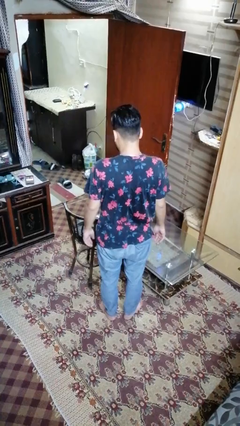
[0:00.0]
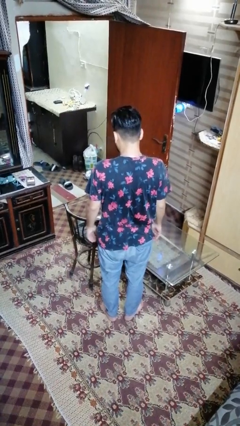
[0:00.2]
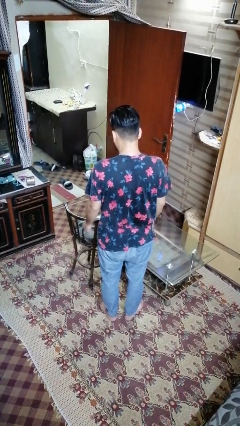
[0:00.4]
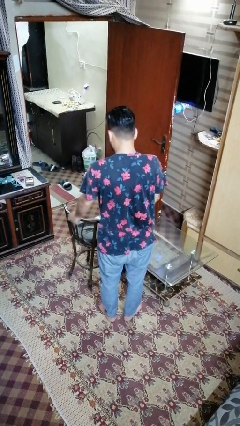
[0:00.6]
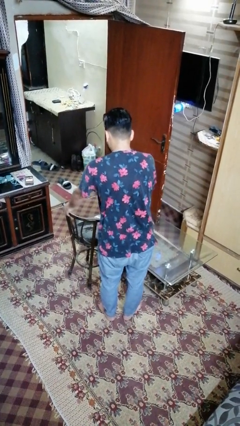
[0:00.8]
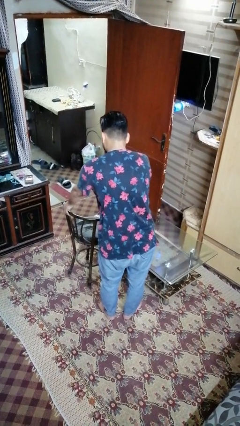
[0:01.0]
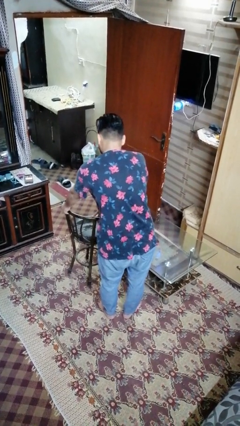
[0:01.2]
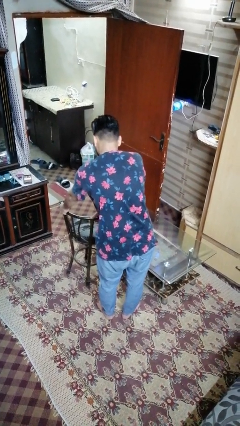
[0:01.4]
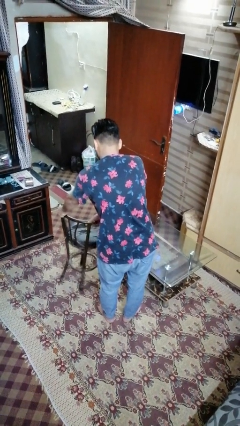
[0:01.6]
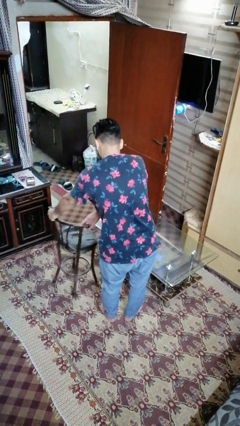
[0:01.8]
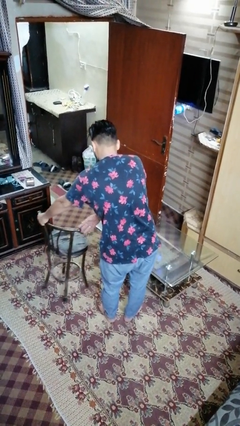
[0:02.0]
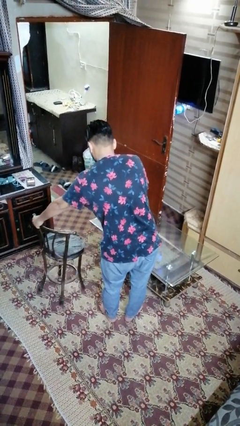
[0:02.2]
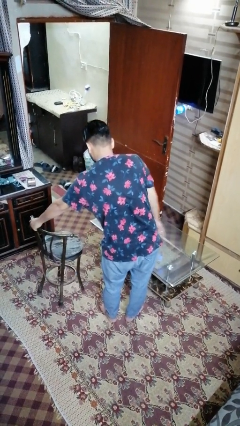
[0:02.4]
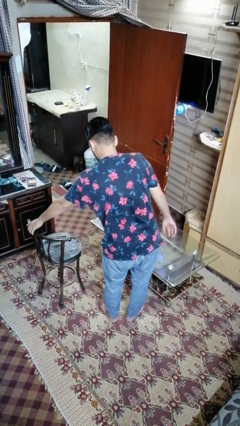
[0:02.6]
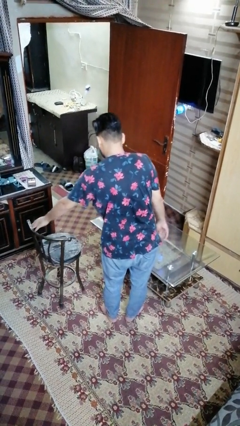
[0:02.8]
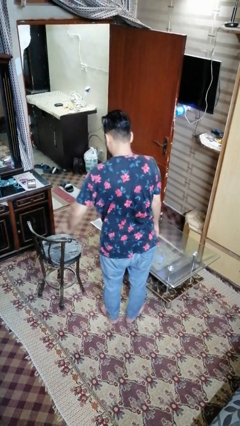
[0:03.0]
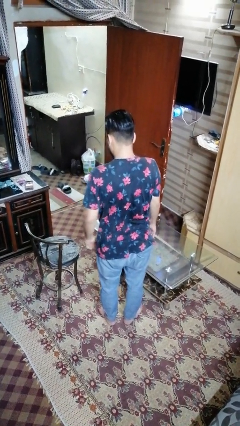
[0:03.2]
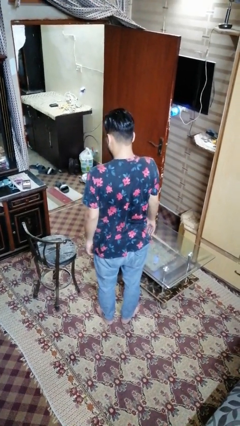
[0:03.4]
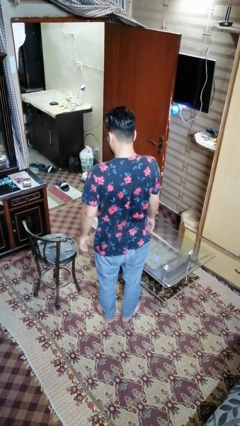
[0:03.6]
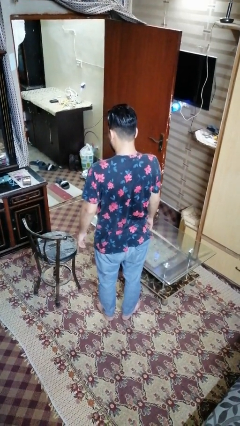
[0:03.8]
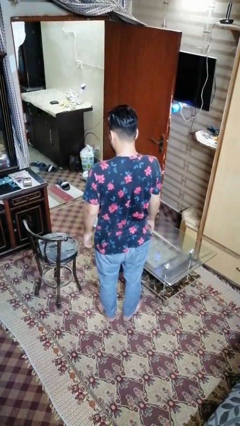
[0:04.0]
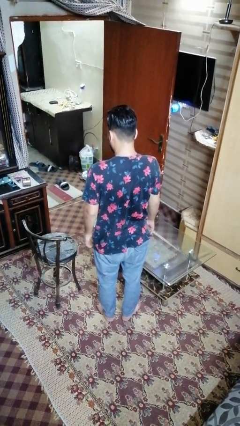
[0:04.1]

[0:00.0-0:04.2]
person pulls out chair

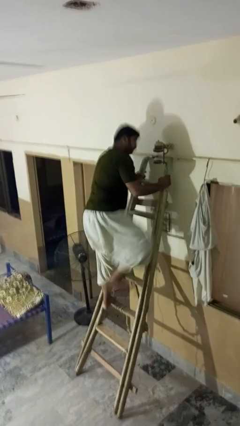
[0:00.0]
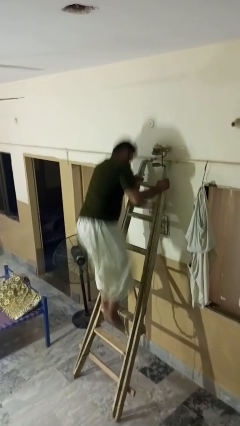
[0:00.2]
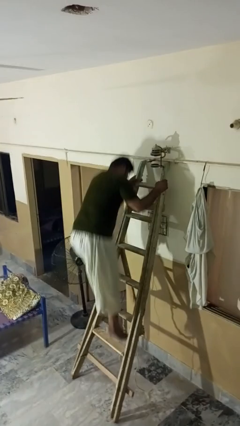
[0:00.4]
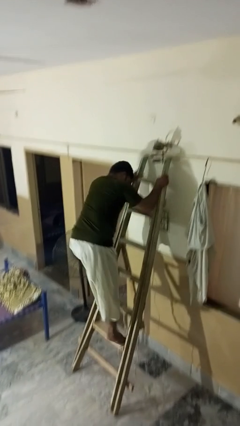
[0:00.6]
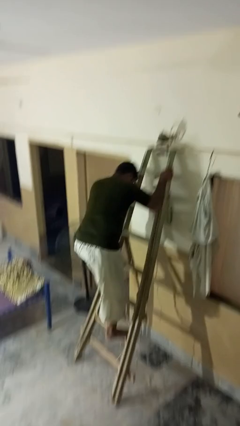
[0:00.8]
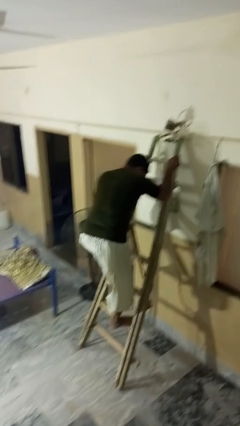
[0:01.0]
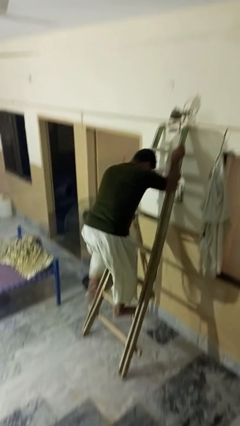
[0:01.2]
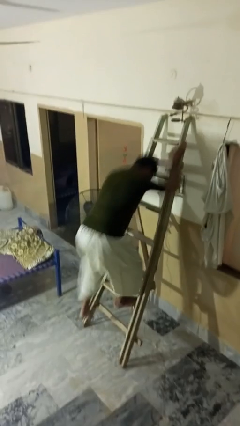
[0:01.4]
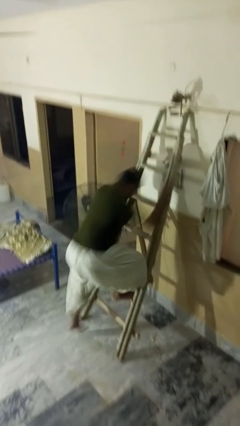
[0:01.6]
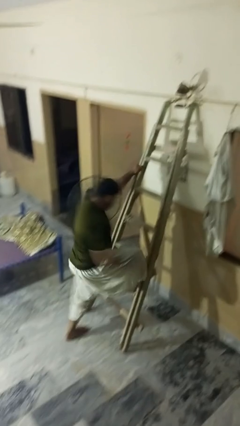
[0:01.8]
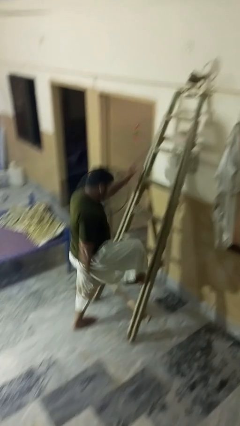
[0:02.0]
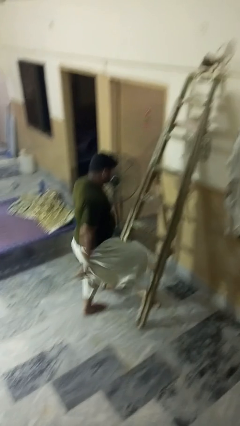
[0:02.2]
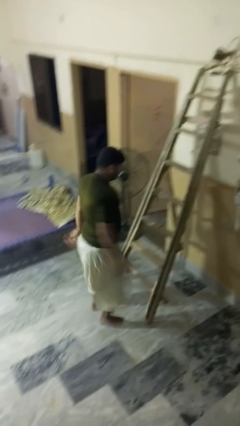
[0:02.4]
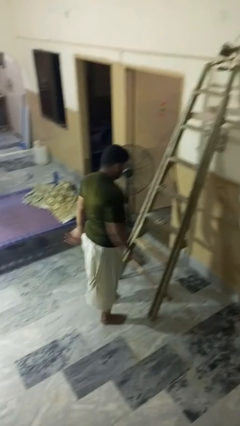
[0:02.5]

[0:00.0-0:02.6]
person climbs down ladder

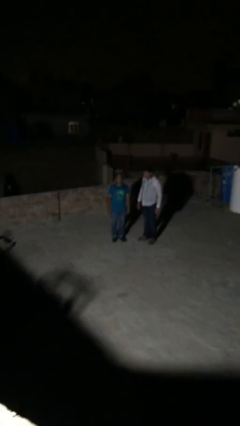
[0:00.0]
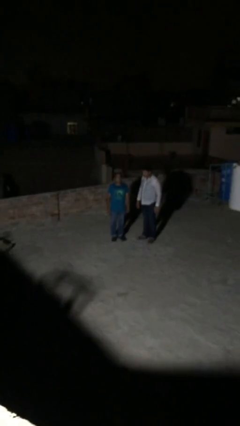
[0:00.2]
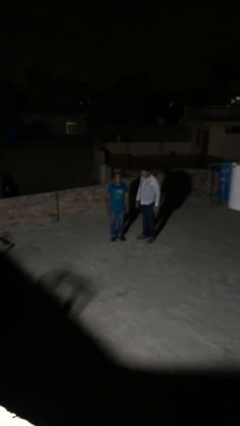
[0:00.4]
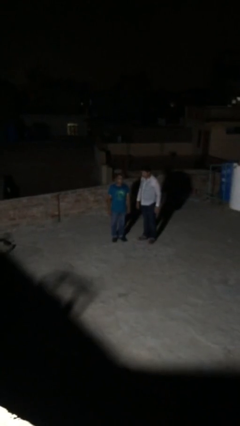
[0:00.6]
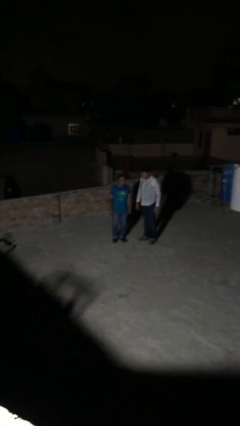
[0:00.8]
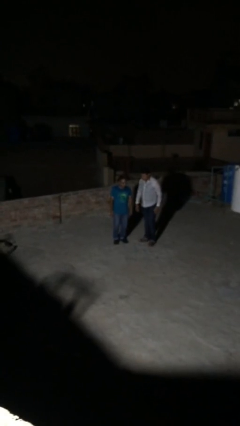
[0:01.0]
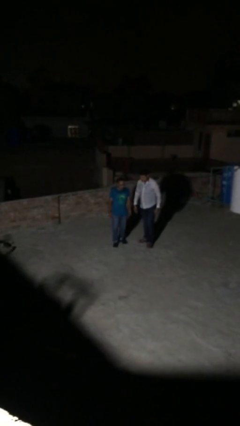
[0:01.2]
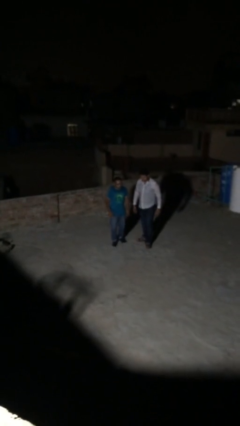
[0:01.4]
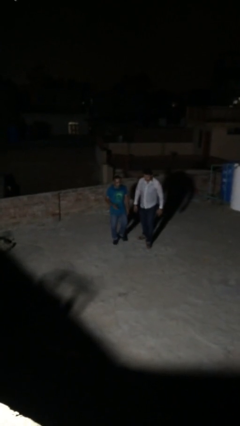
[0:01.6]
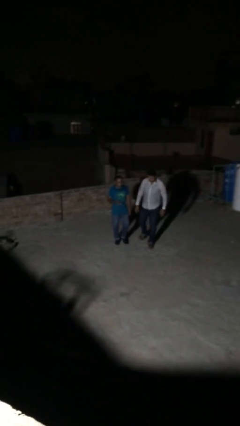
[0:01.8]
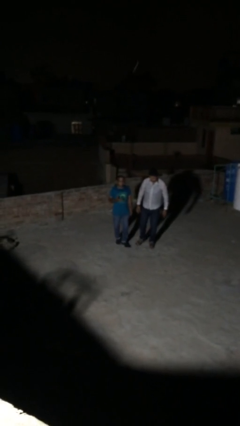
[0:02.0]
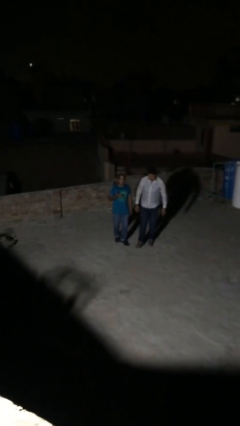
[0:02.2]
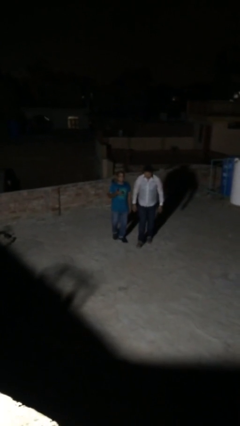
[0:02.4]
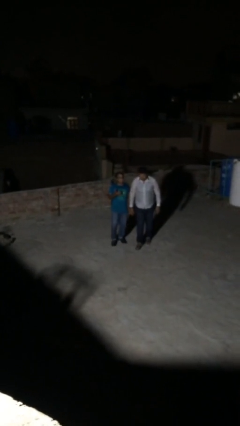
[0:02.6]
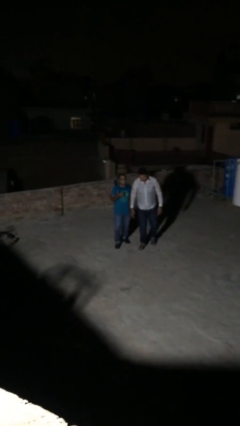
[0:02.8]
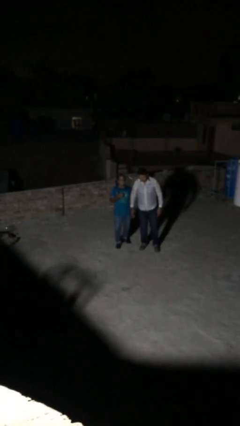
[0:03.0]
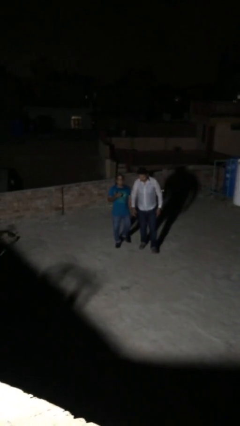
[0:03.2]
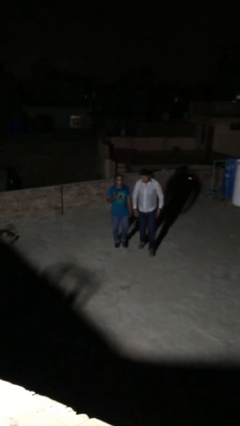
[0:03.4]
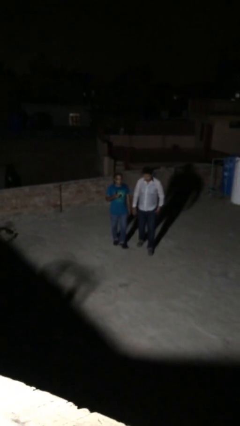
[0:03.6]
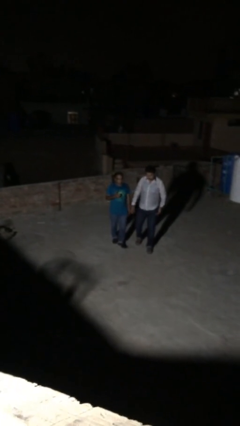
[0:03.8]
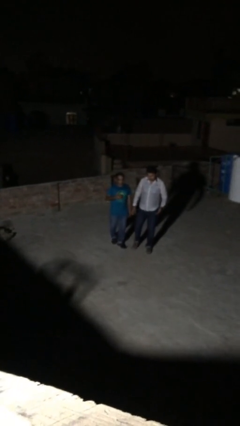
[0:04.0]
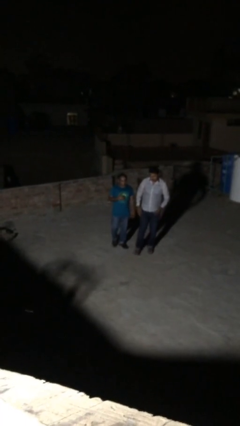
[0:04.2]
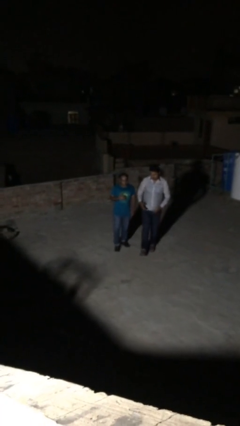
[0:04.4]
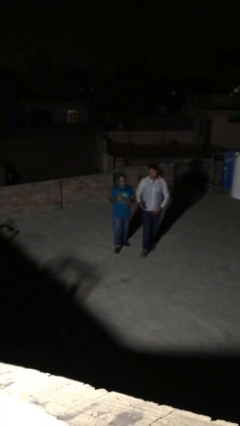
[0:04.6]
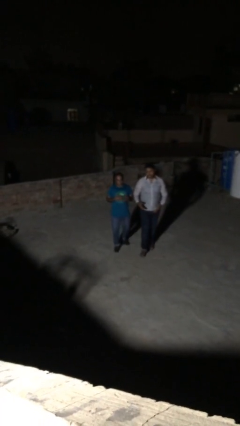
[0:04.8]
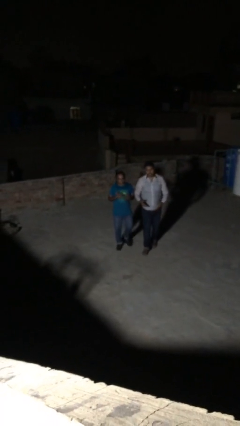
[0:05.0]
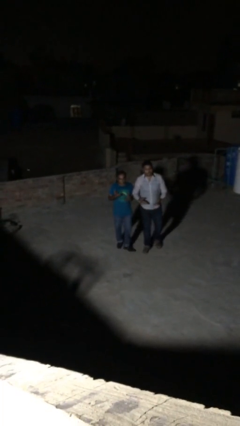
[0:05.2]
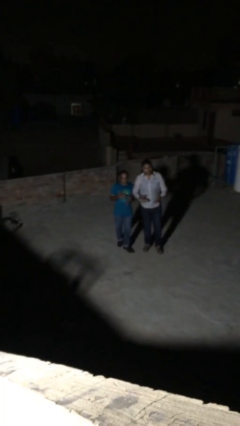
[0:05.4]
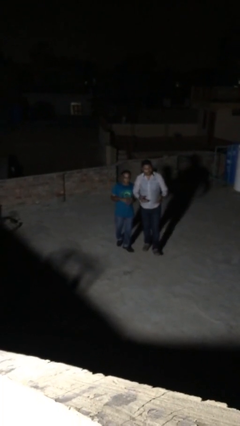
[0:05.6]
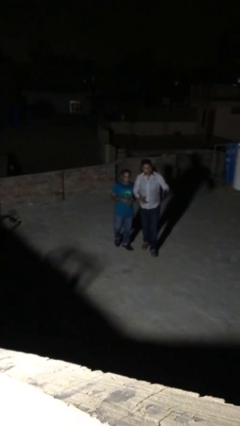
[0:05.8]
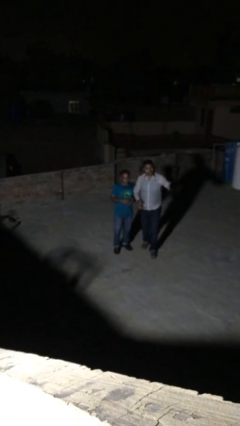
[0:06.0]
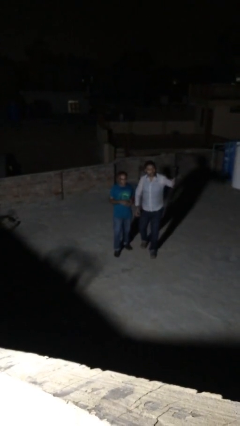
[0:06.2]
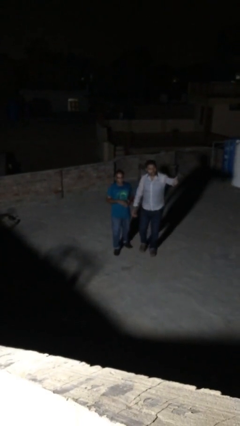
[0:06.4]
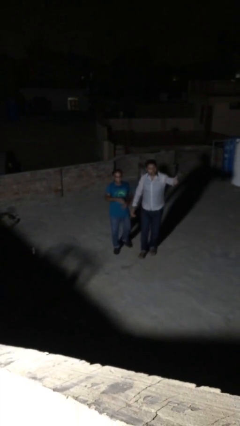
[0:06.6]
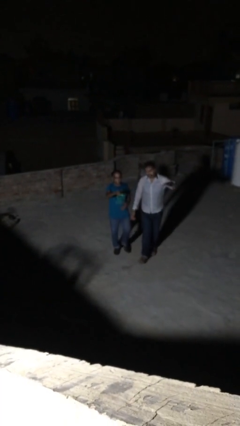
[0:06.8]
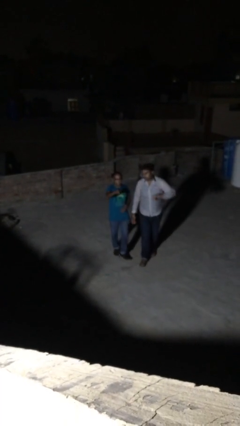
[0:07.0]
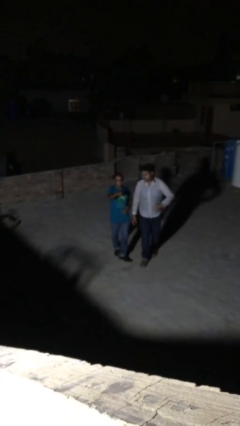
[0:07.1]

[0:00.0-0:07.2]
person talks to person

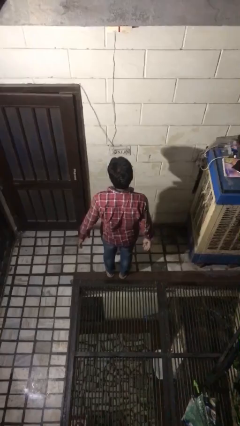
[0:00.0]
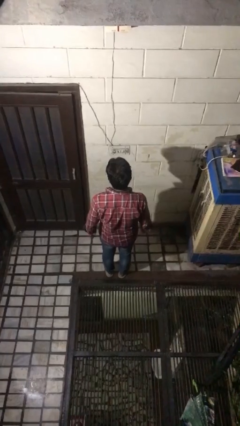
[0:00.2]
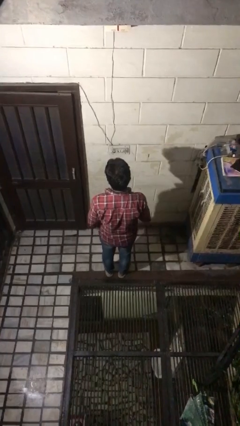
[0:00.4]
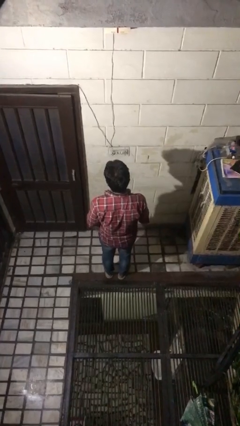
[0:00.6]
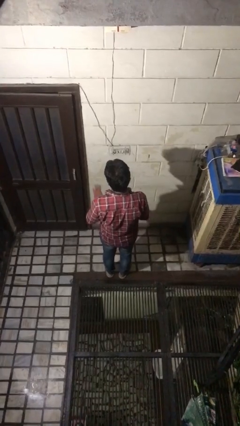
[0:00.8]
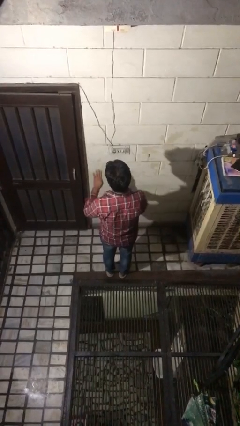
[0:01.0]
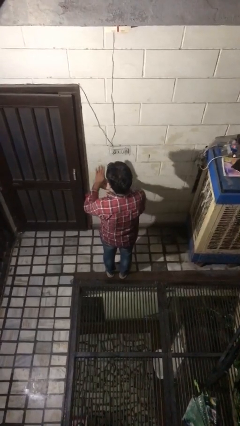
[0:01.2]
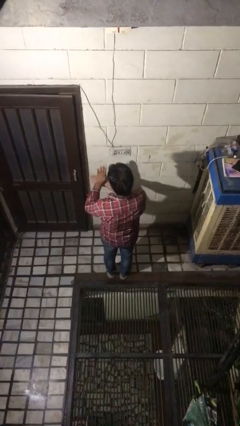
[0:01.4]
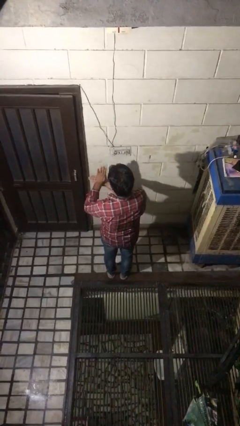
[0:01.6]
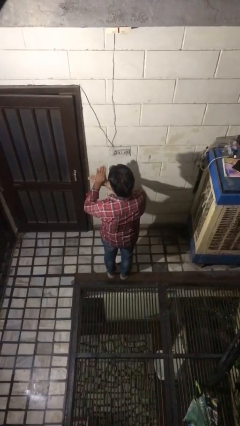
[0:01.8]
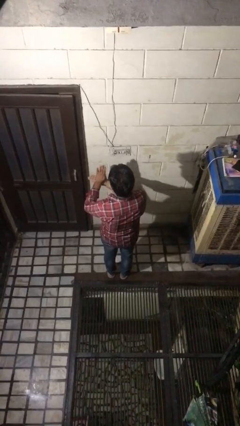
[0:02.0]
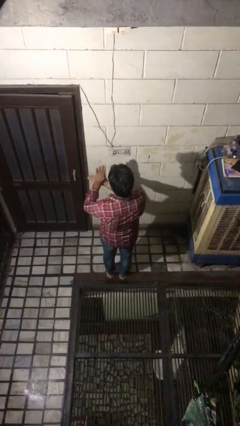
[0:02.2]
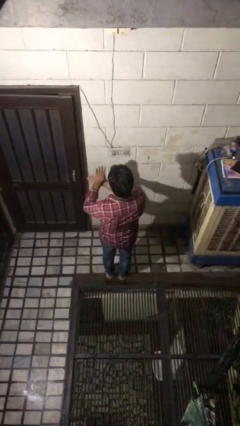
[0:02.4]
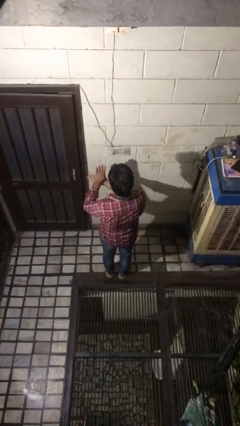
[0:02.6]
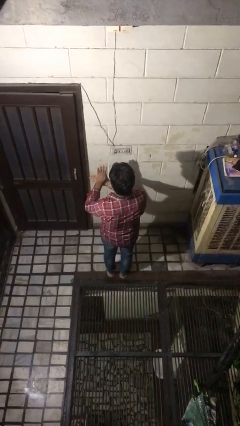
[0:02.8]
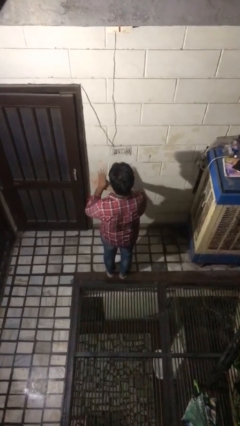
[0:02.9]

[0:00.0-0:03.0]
person gestures number four

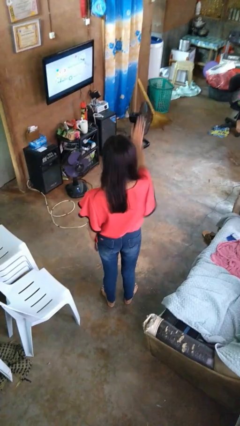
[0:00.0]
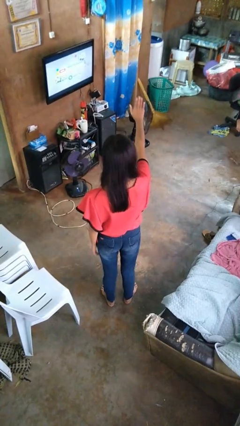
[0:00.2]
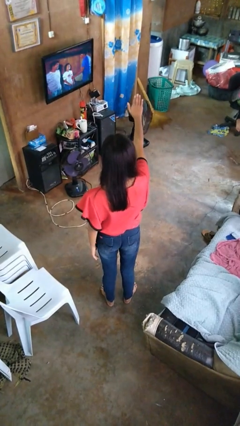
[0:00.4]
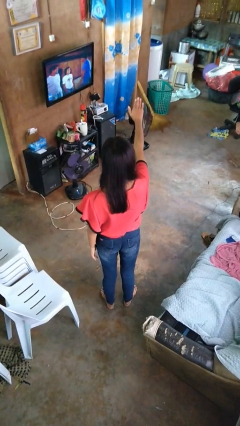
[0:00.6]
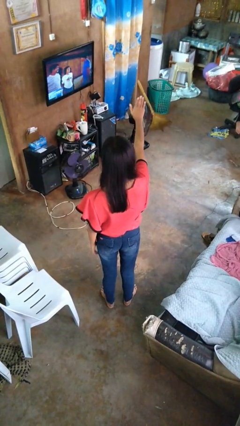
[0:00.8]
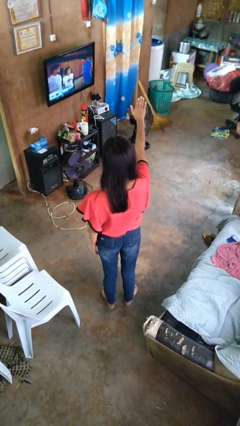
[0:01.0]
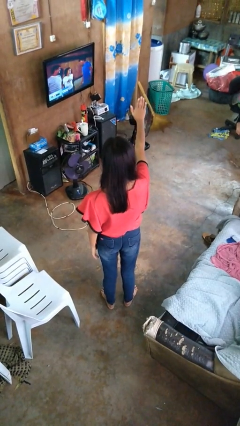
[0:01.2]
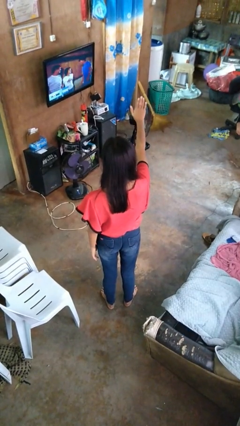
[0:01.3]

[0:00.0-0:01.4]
person gestures stop
